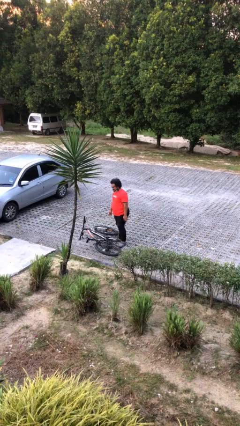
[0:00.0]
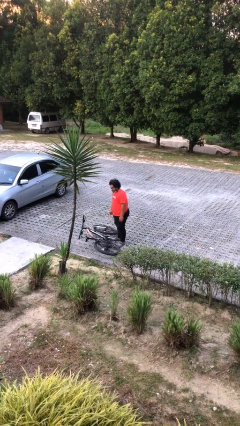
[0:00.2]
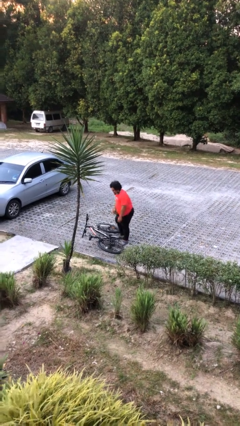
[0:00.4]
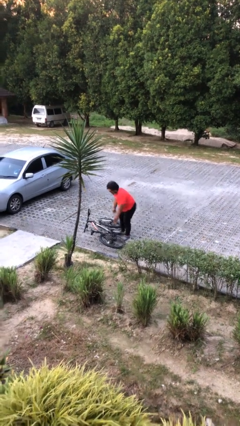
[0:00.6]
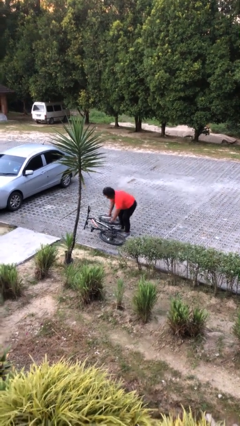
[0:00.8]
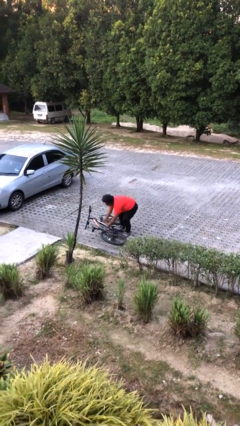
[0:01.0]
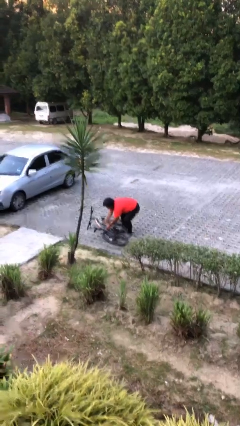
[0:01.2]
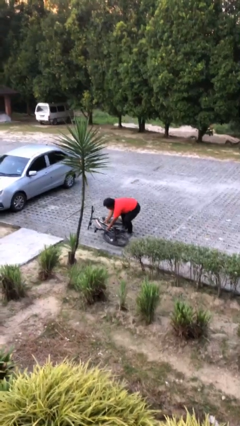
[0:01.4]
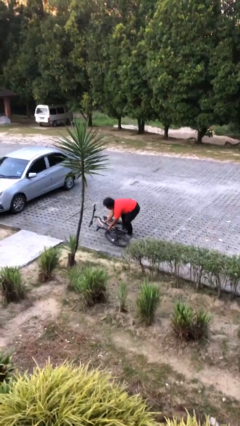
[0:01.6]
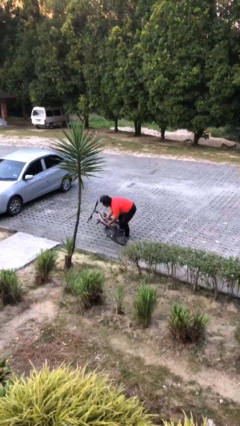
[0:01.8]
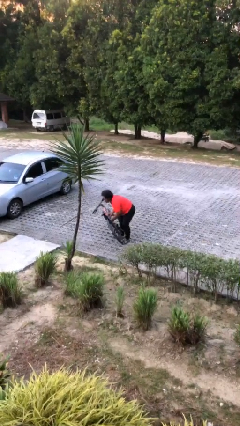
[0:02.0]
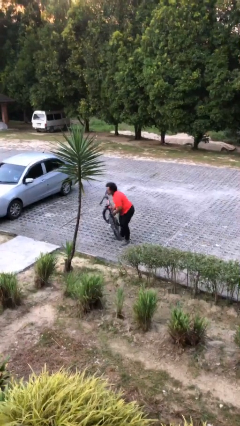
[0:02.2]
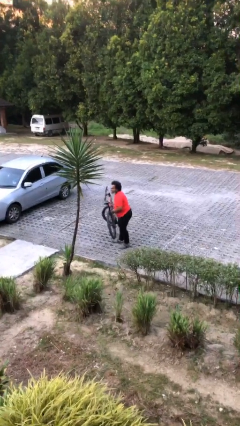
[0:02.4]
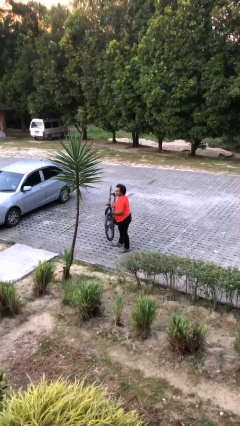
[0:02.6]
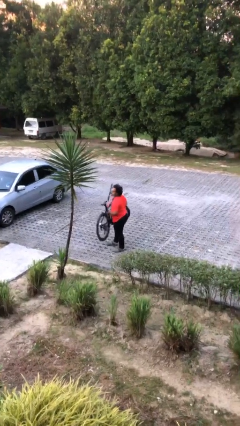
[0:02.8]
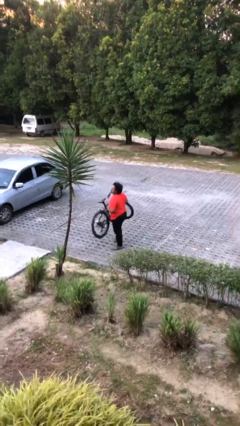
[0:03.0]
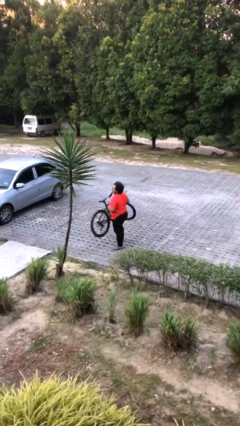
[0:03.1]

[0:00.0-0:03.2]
person picks up object from floor

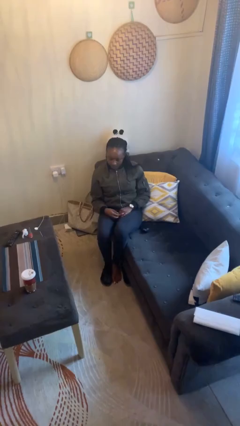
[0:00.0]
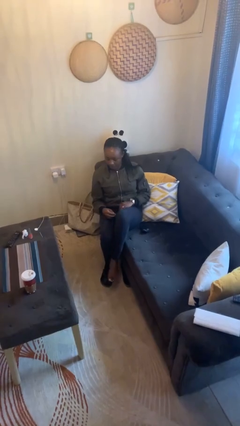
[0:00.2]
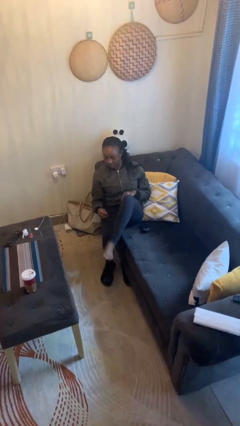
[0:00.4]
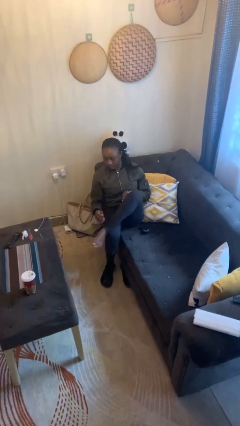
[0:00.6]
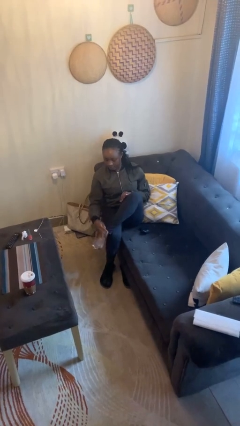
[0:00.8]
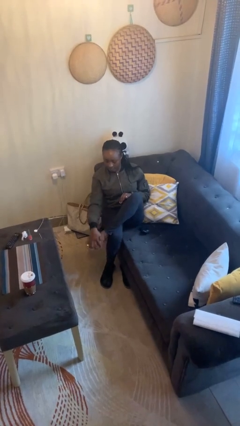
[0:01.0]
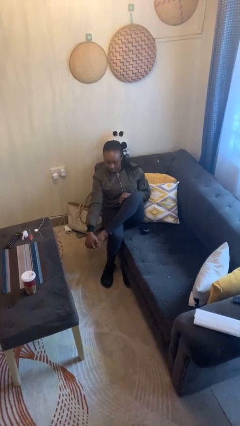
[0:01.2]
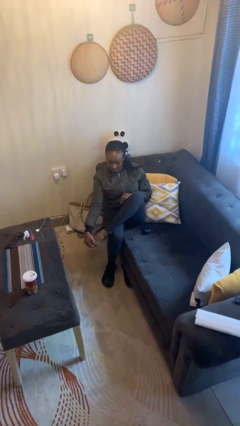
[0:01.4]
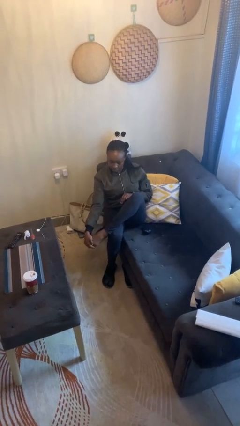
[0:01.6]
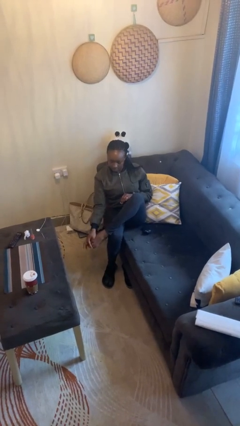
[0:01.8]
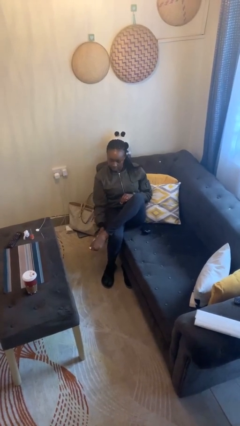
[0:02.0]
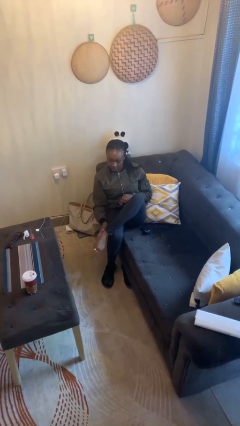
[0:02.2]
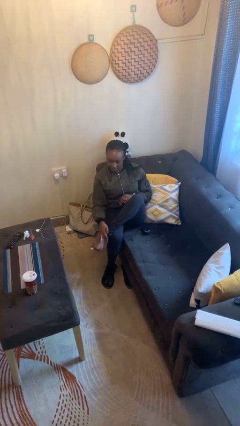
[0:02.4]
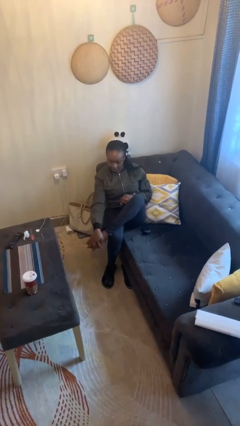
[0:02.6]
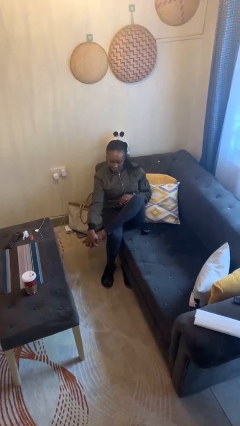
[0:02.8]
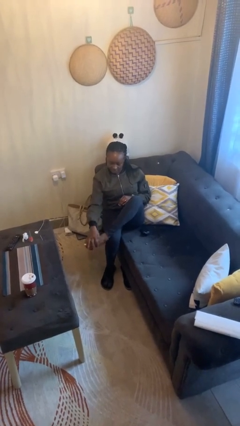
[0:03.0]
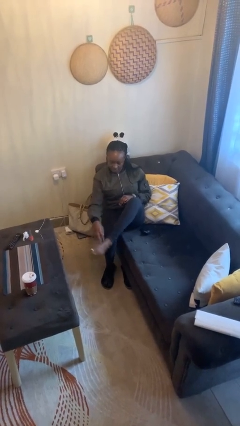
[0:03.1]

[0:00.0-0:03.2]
person rubs foot

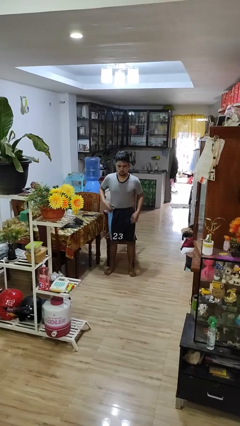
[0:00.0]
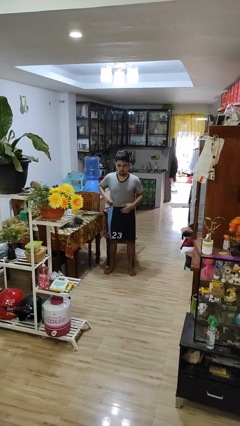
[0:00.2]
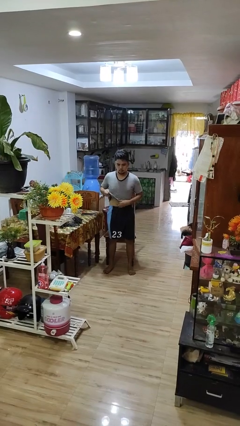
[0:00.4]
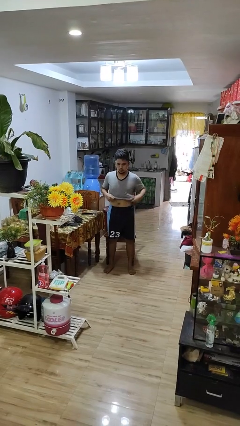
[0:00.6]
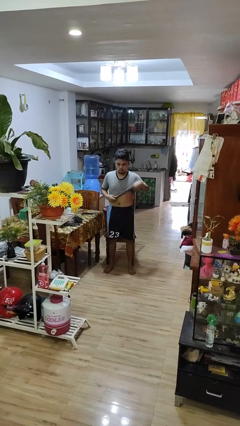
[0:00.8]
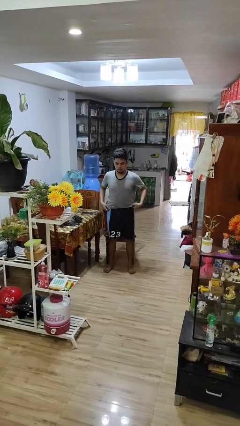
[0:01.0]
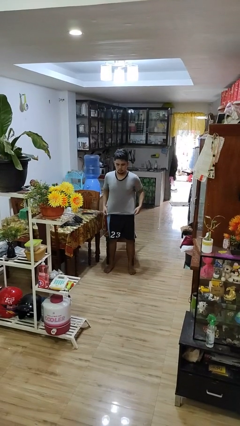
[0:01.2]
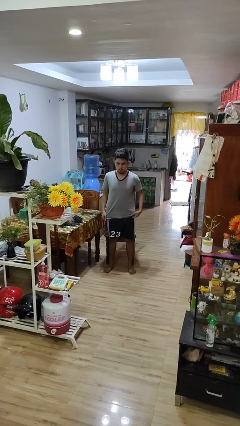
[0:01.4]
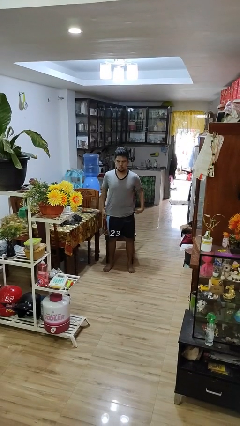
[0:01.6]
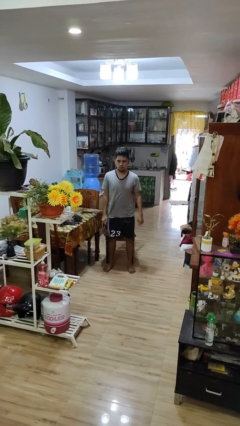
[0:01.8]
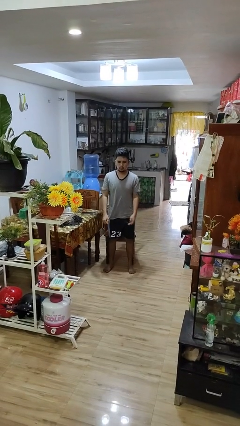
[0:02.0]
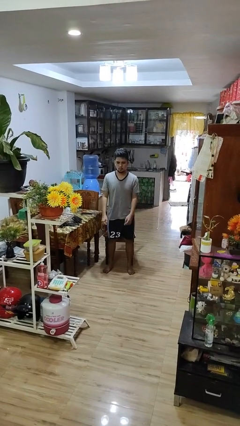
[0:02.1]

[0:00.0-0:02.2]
person untucks shirt

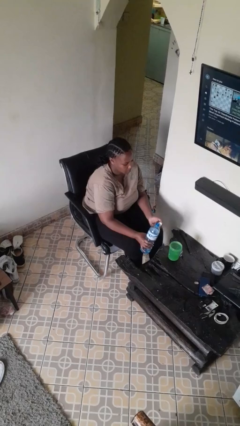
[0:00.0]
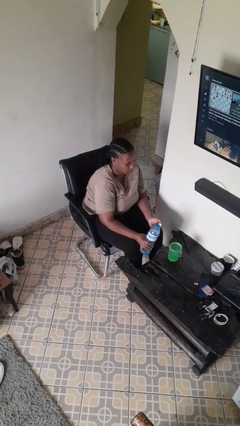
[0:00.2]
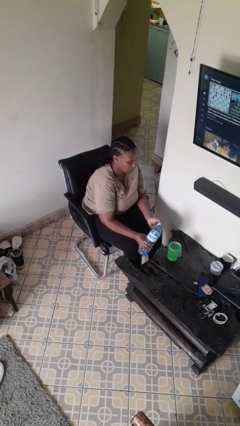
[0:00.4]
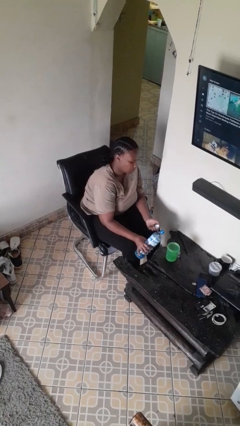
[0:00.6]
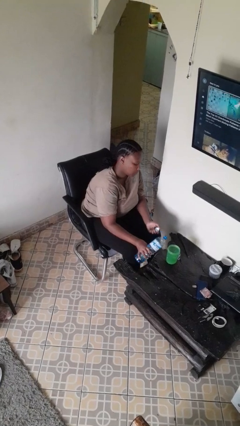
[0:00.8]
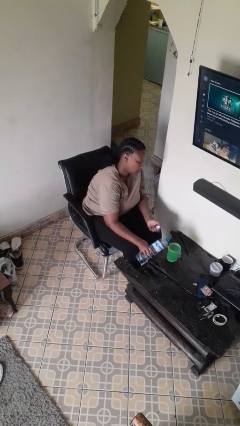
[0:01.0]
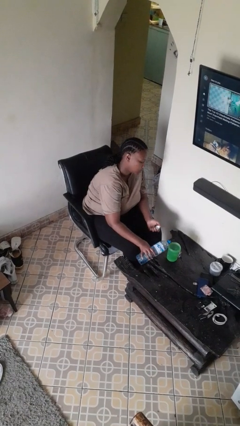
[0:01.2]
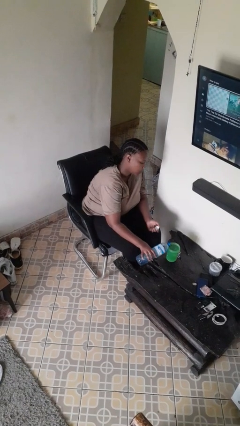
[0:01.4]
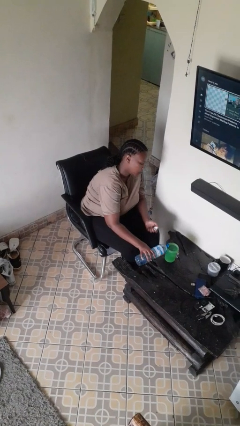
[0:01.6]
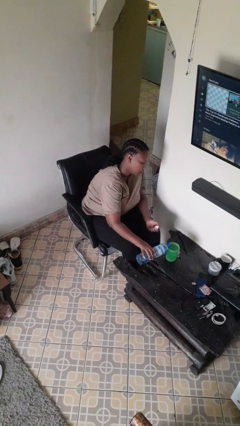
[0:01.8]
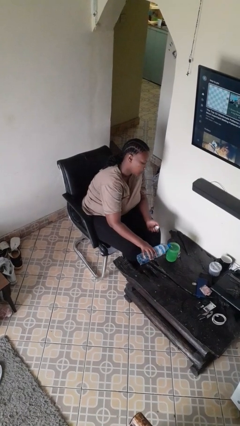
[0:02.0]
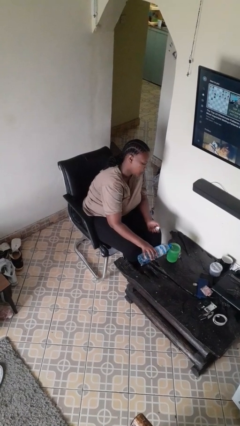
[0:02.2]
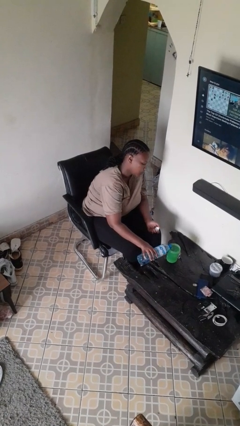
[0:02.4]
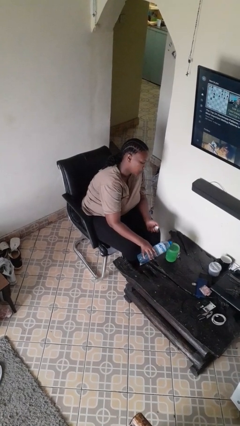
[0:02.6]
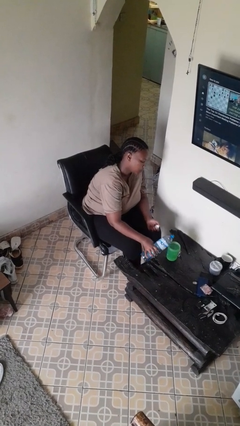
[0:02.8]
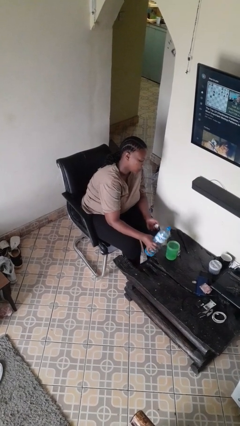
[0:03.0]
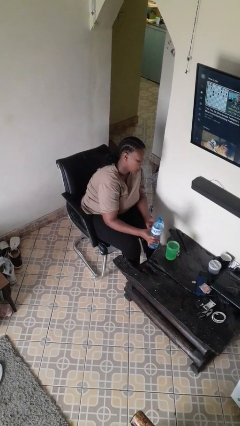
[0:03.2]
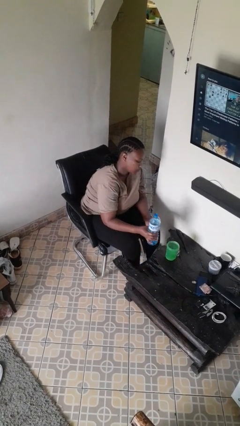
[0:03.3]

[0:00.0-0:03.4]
person pours liquid into cup

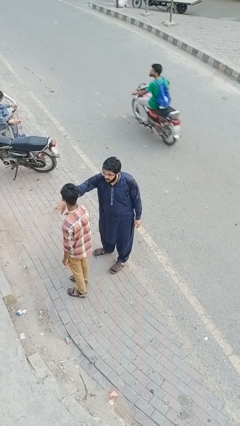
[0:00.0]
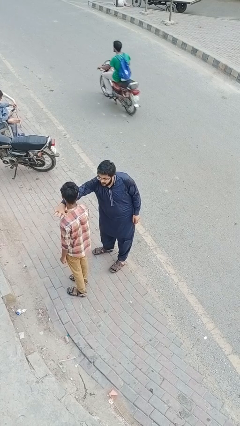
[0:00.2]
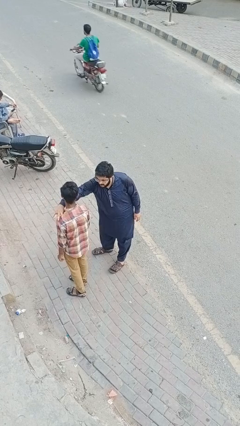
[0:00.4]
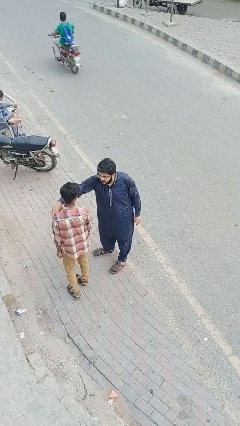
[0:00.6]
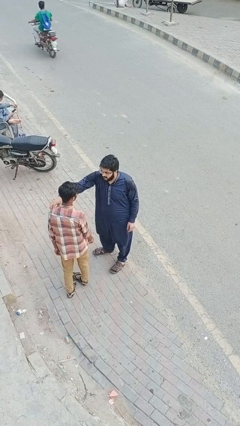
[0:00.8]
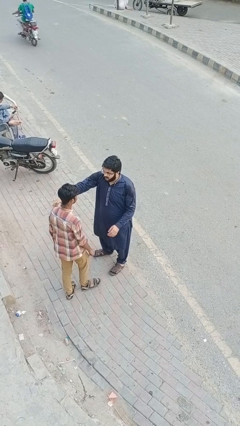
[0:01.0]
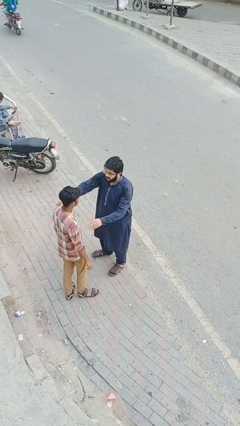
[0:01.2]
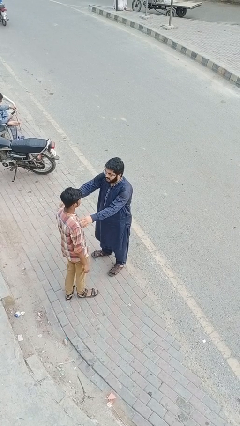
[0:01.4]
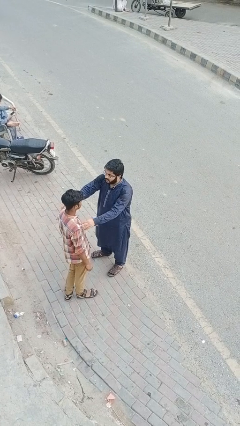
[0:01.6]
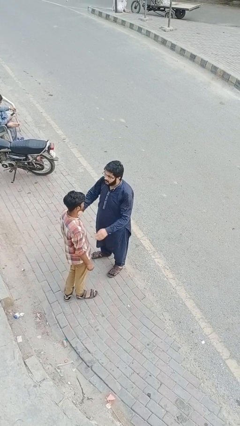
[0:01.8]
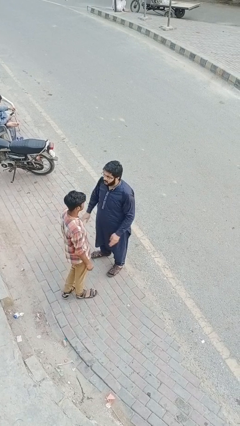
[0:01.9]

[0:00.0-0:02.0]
person spins person around

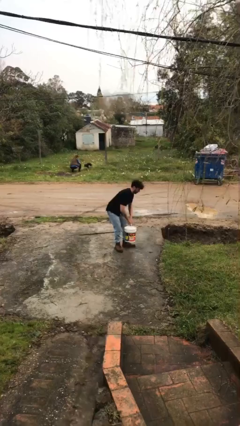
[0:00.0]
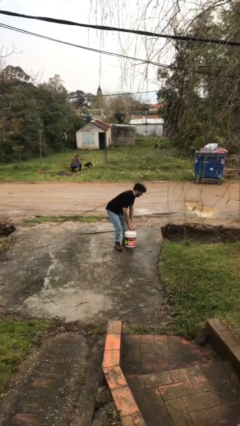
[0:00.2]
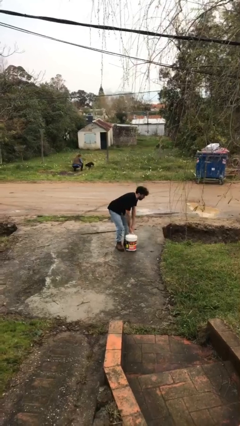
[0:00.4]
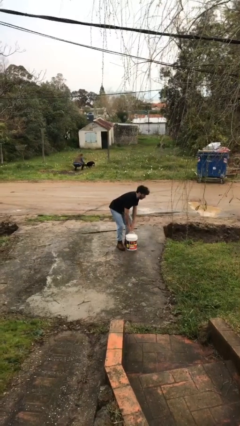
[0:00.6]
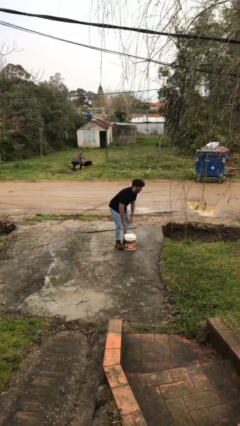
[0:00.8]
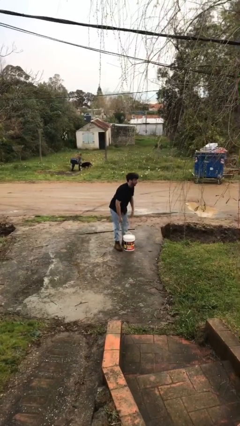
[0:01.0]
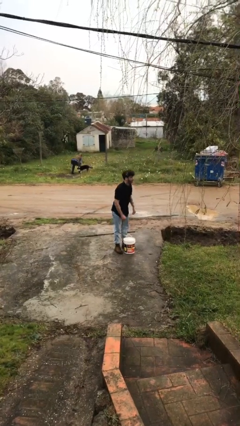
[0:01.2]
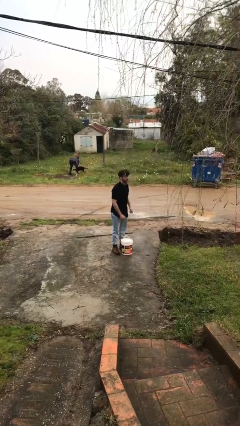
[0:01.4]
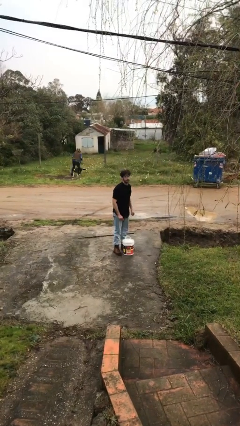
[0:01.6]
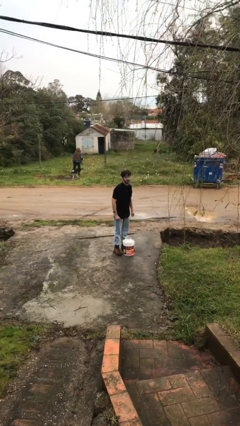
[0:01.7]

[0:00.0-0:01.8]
person puts down object on floor

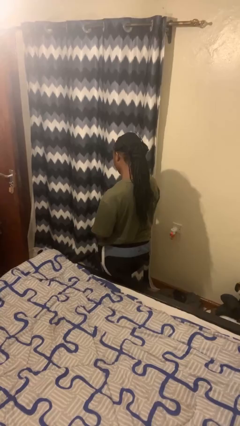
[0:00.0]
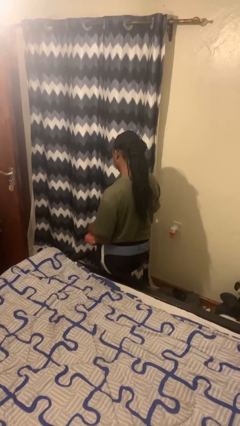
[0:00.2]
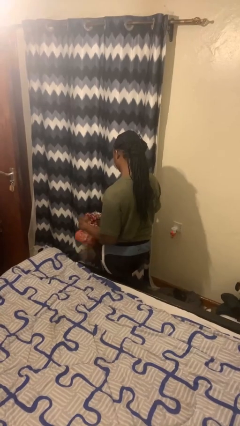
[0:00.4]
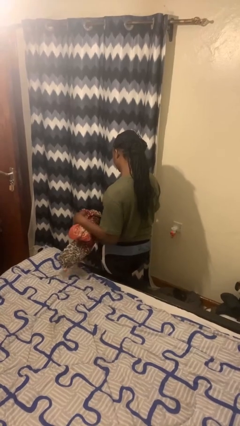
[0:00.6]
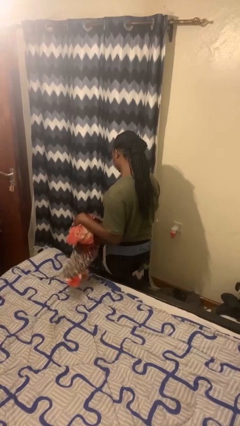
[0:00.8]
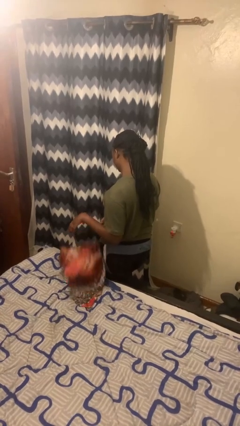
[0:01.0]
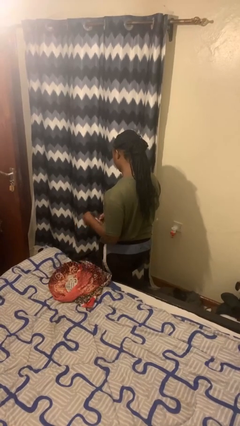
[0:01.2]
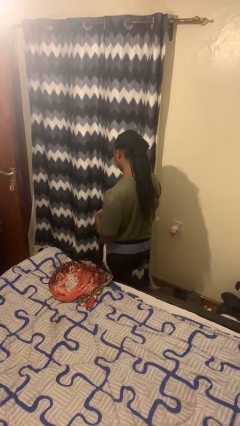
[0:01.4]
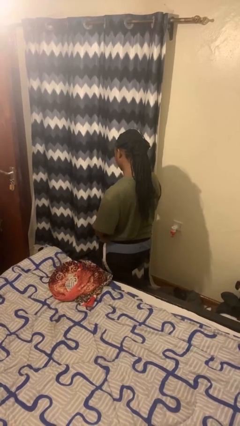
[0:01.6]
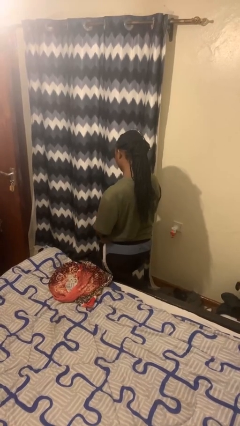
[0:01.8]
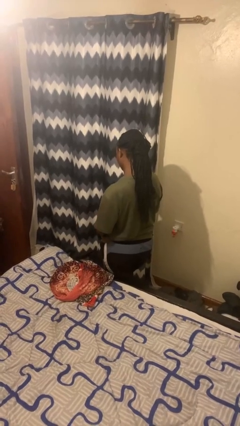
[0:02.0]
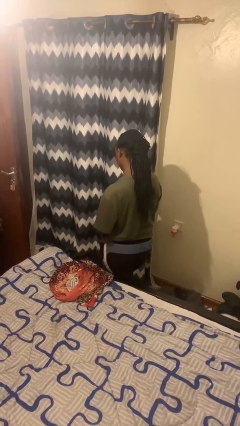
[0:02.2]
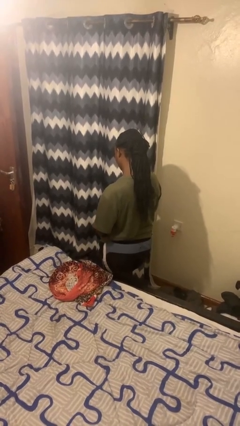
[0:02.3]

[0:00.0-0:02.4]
person throws object on bed
